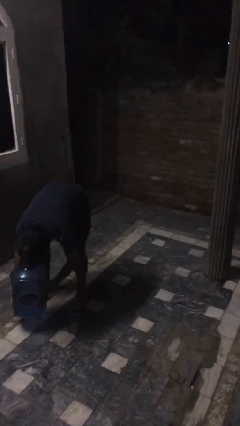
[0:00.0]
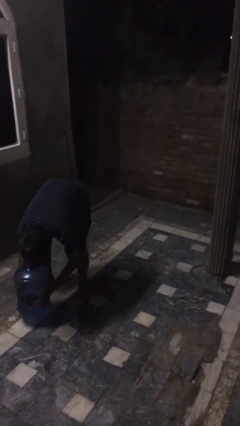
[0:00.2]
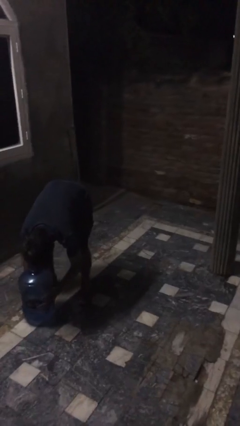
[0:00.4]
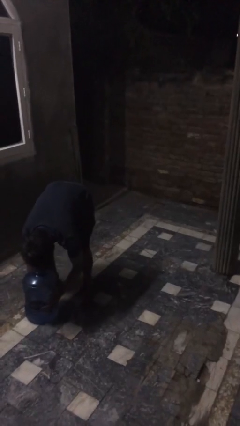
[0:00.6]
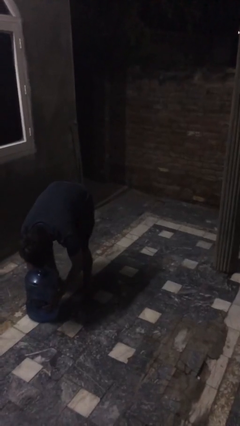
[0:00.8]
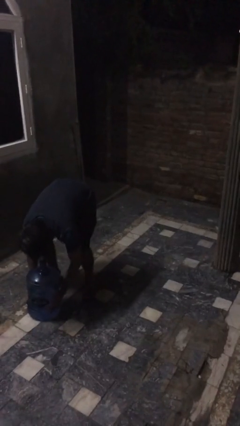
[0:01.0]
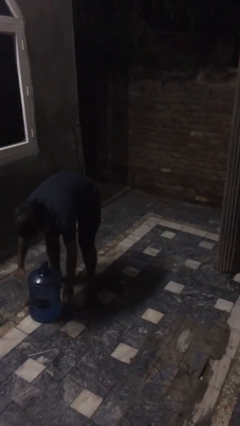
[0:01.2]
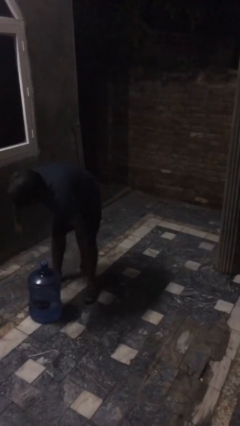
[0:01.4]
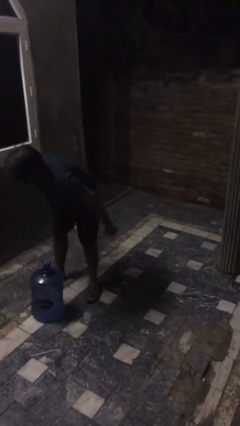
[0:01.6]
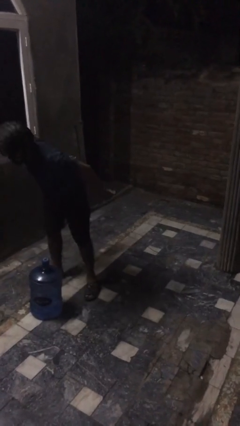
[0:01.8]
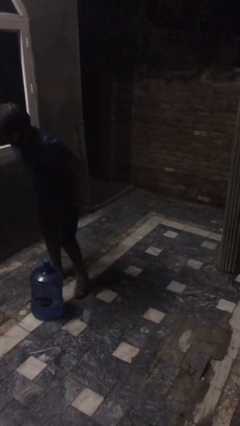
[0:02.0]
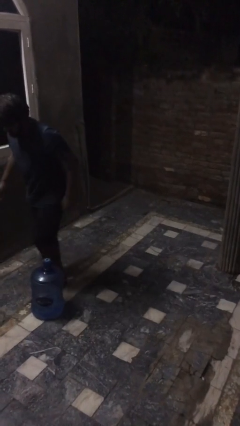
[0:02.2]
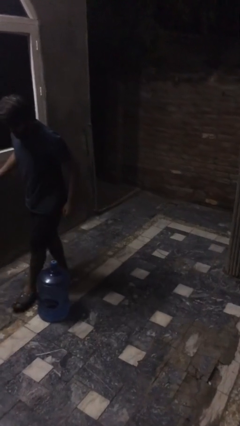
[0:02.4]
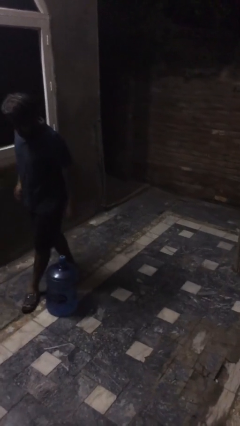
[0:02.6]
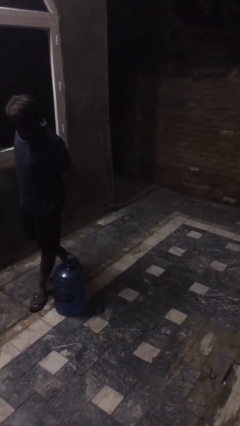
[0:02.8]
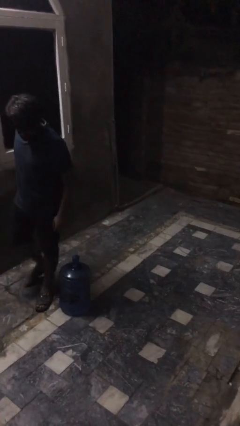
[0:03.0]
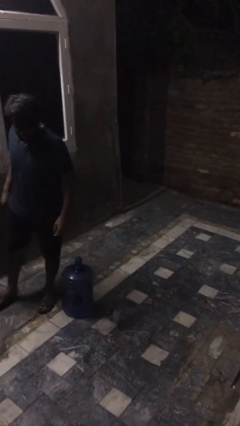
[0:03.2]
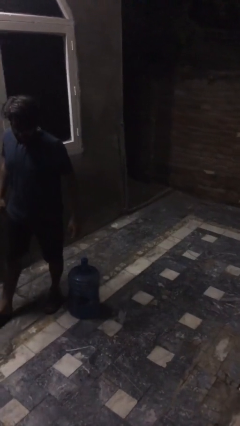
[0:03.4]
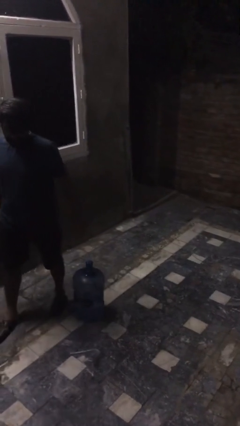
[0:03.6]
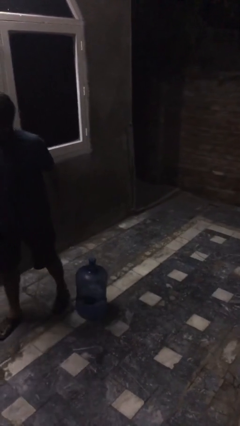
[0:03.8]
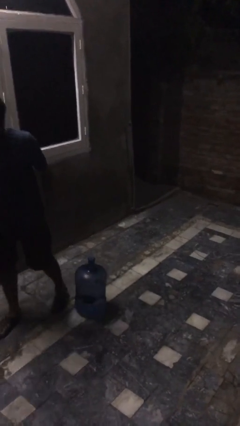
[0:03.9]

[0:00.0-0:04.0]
person puts down object on floor

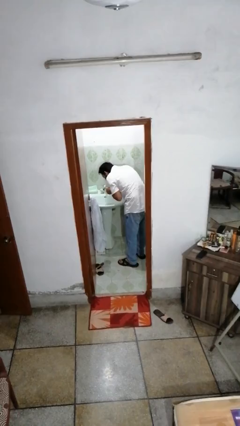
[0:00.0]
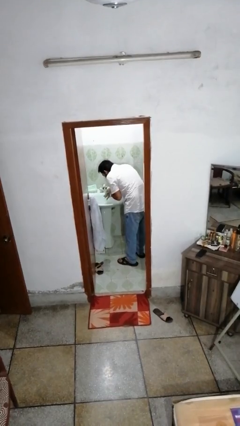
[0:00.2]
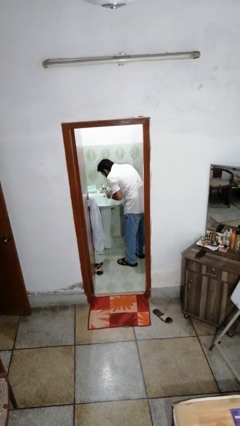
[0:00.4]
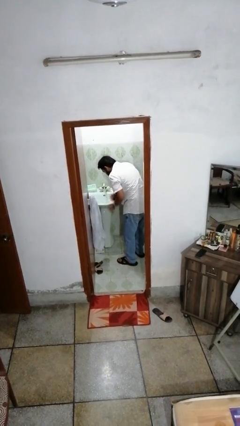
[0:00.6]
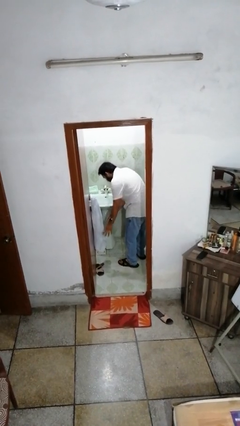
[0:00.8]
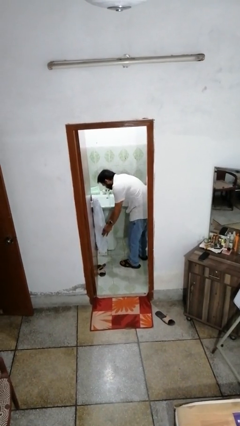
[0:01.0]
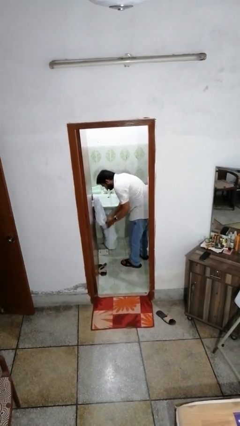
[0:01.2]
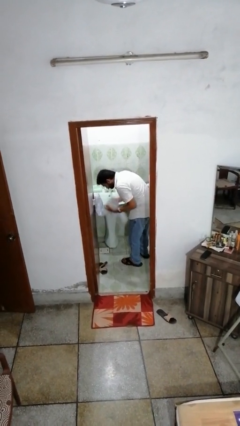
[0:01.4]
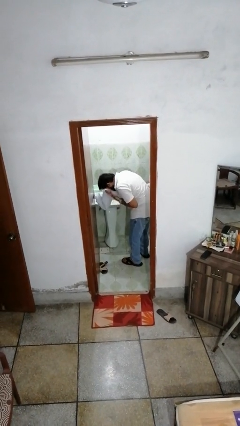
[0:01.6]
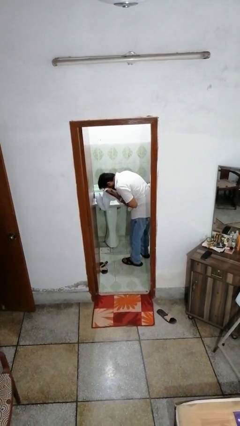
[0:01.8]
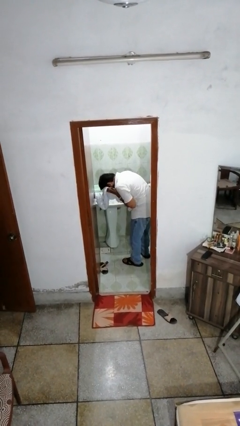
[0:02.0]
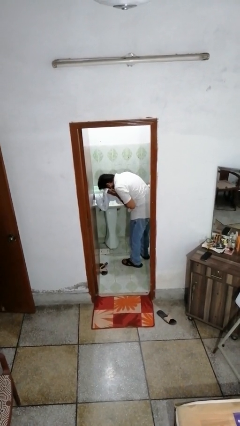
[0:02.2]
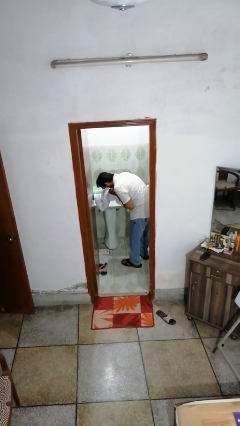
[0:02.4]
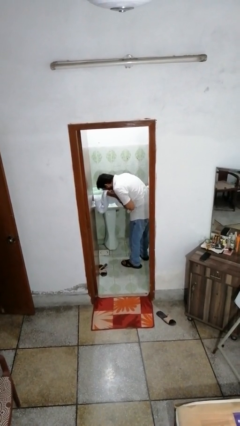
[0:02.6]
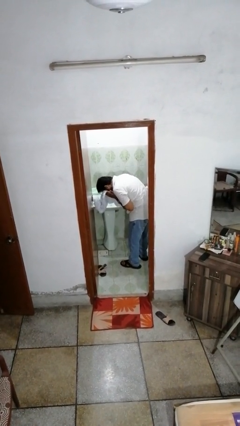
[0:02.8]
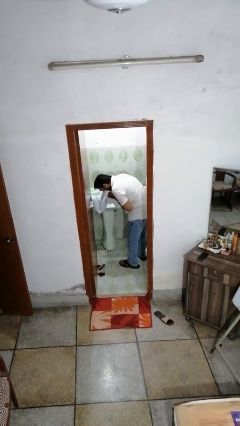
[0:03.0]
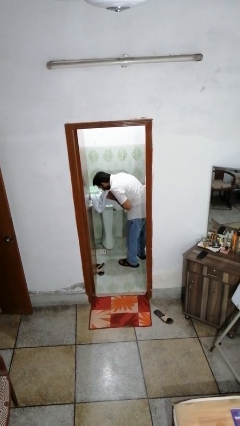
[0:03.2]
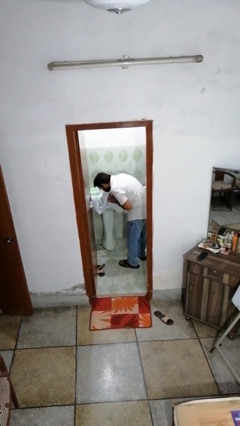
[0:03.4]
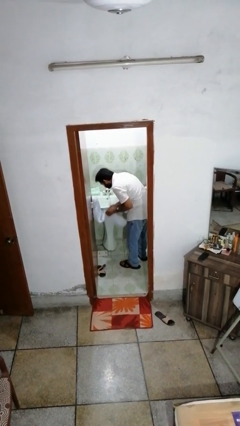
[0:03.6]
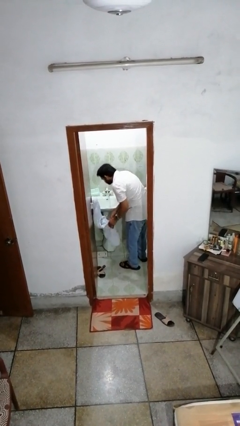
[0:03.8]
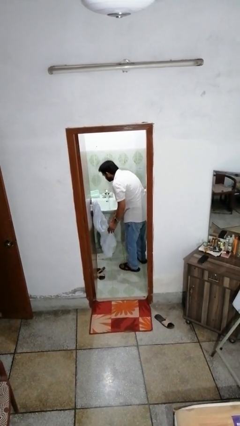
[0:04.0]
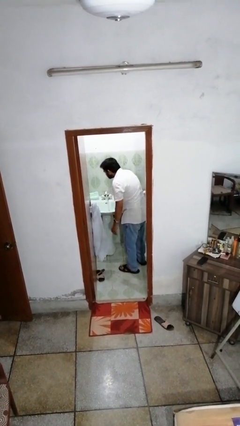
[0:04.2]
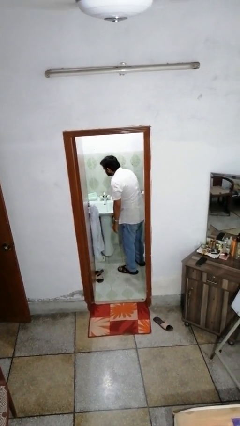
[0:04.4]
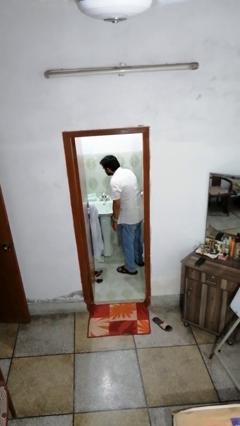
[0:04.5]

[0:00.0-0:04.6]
person dries face with towel

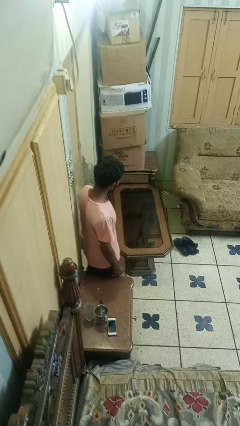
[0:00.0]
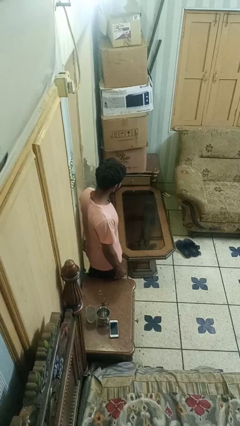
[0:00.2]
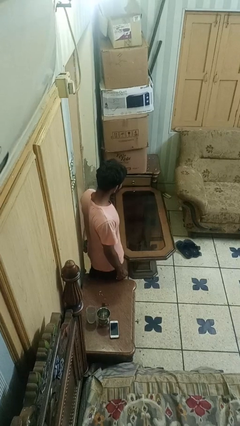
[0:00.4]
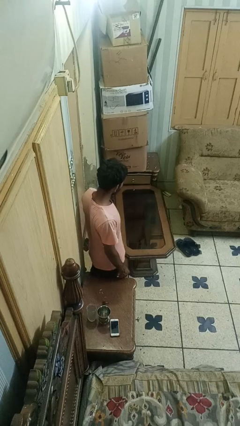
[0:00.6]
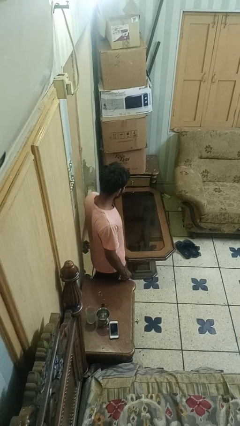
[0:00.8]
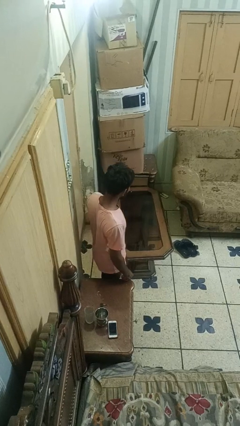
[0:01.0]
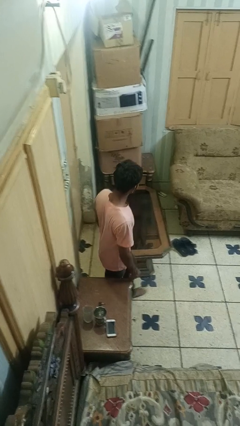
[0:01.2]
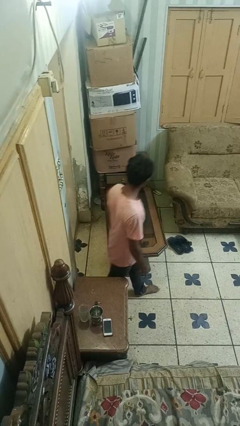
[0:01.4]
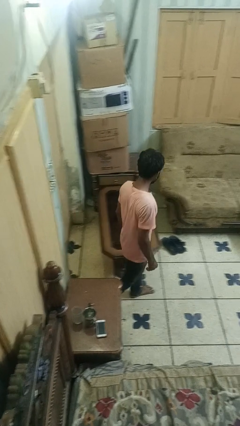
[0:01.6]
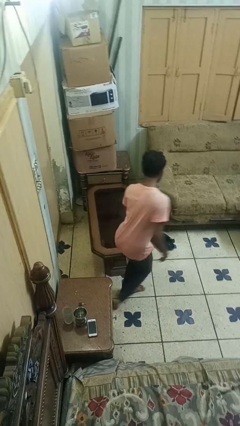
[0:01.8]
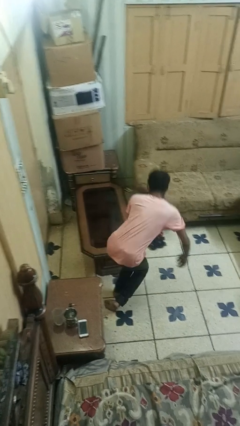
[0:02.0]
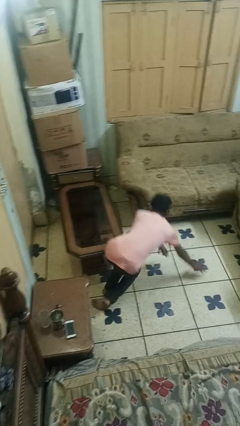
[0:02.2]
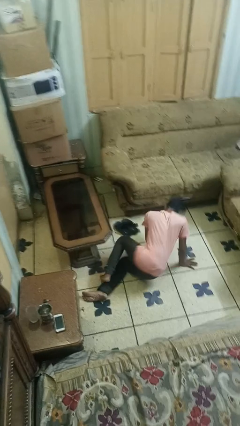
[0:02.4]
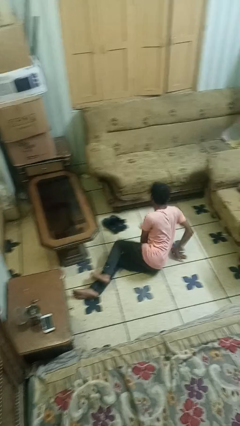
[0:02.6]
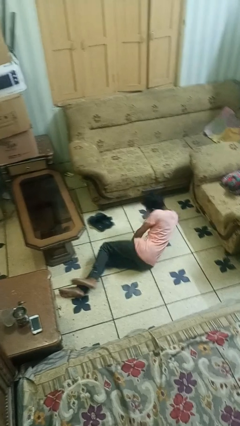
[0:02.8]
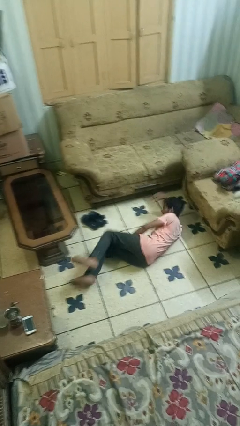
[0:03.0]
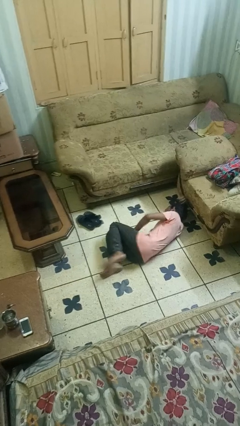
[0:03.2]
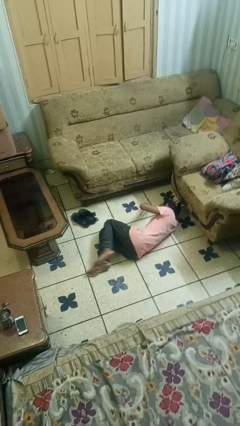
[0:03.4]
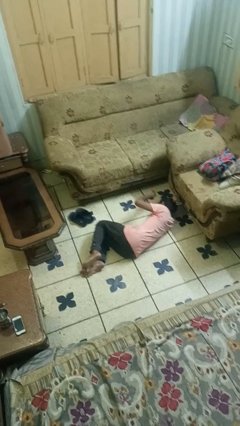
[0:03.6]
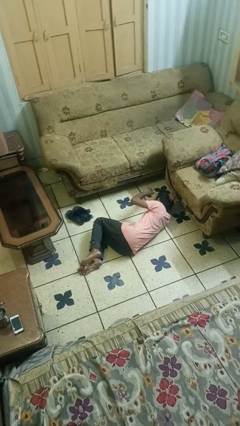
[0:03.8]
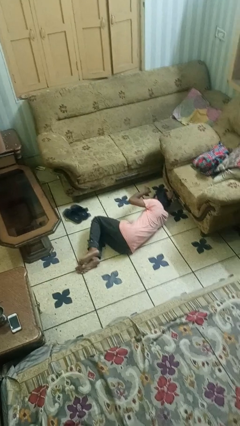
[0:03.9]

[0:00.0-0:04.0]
person trips on object on floor

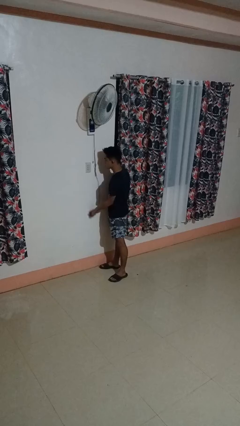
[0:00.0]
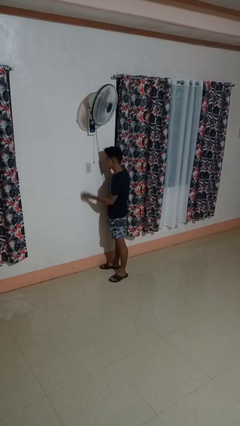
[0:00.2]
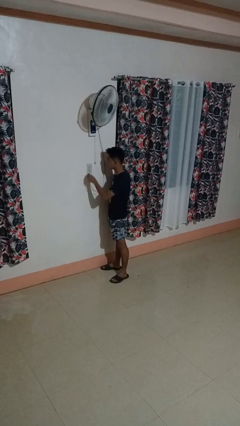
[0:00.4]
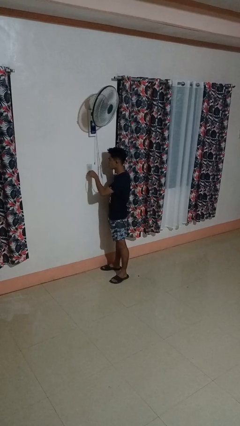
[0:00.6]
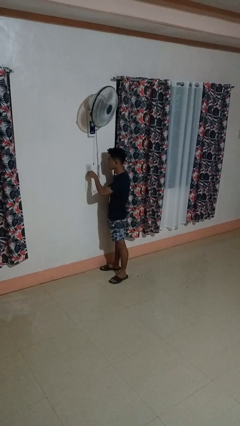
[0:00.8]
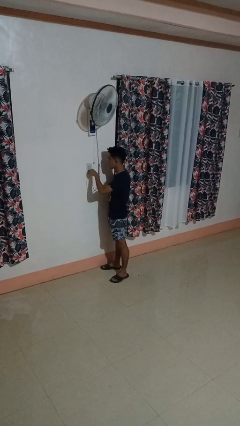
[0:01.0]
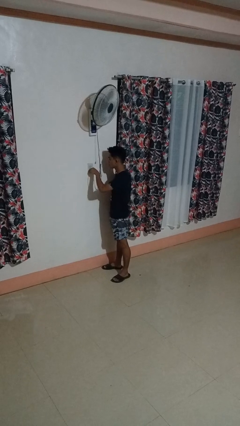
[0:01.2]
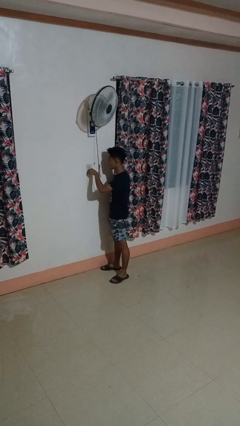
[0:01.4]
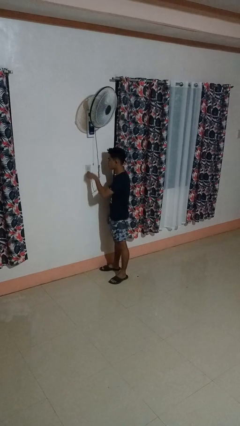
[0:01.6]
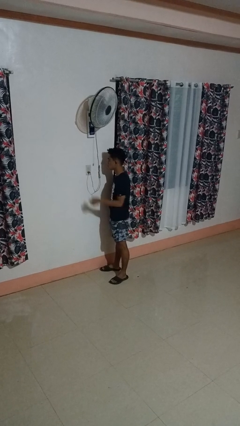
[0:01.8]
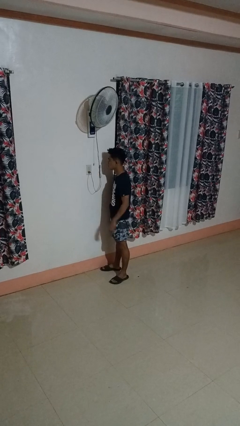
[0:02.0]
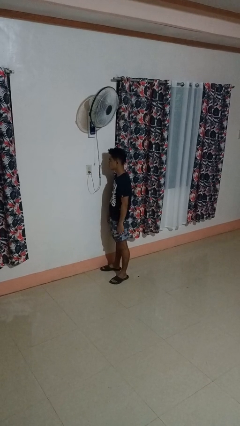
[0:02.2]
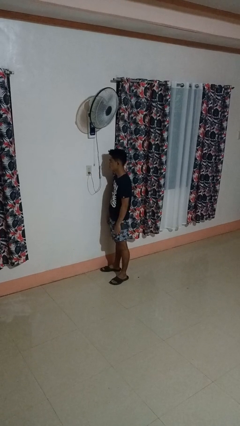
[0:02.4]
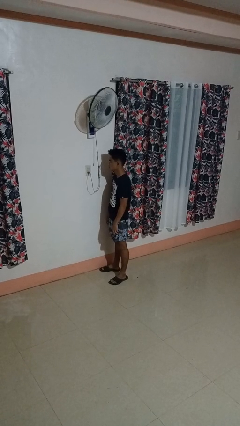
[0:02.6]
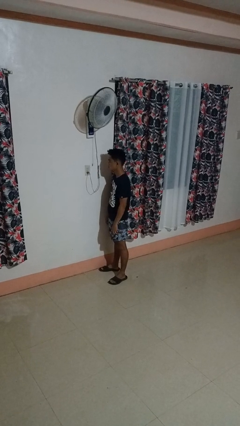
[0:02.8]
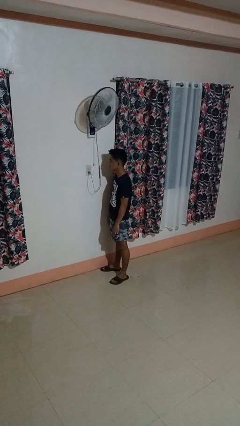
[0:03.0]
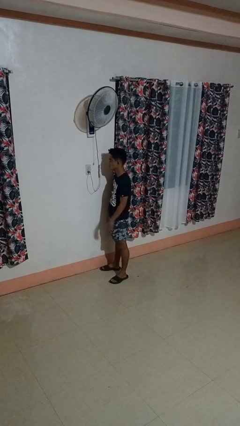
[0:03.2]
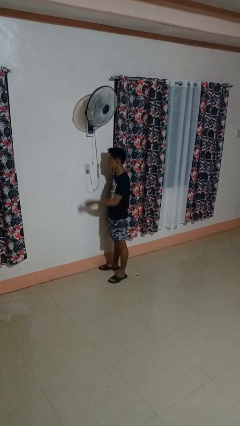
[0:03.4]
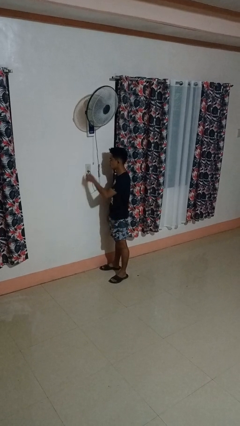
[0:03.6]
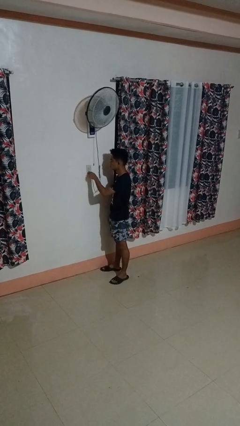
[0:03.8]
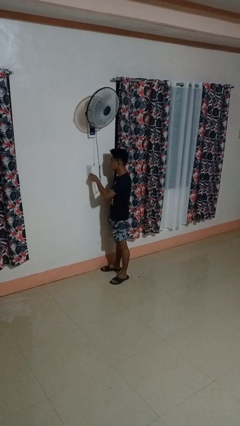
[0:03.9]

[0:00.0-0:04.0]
person plugs into electrical socket

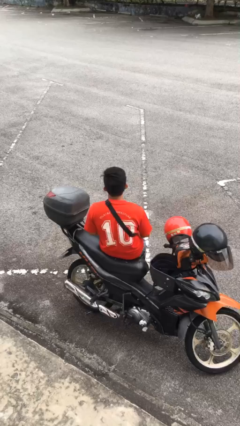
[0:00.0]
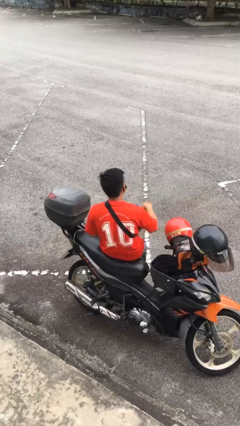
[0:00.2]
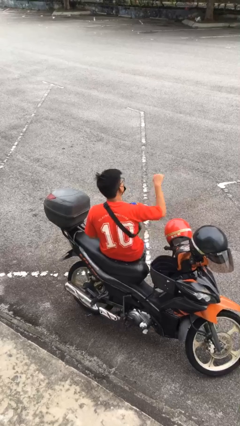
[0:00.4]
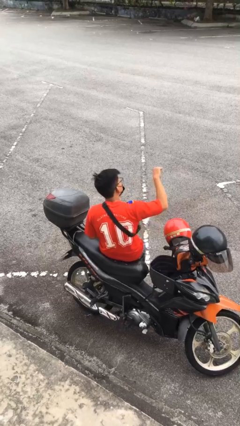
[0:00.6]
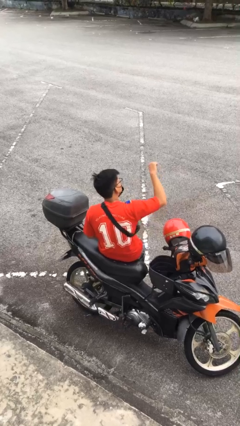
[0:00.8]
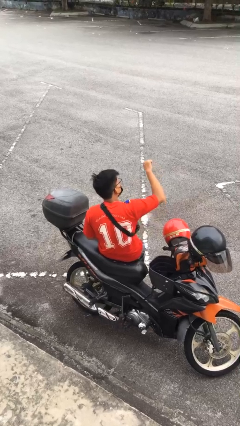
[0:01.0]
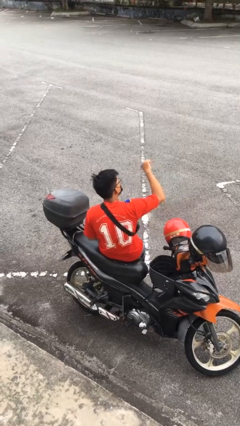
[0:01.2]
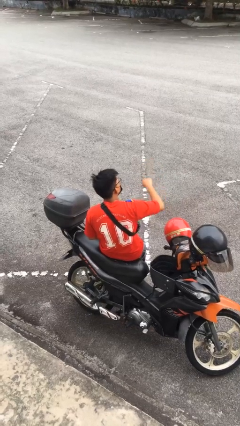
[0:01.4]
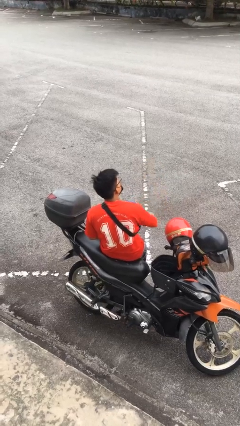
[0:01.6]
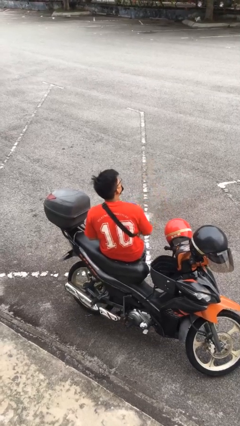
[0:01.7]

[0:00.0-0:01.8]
person gestures thumbs down
